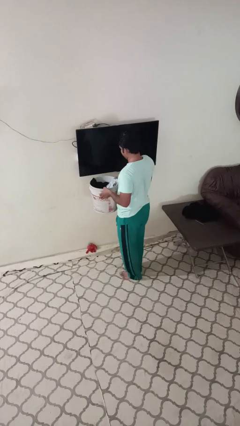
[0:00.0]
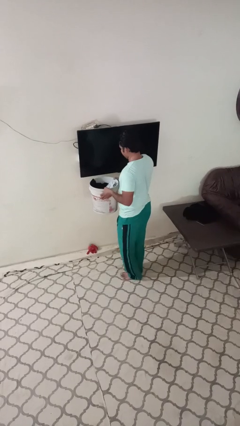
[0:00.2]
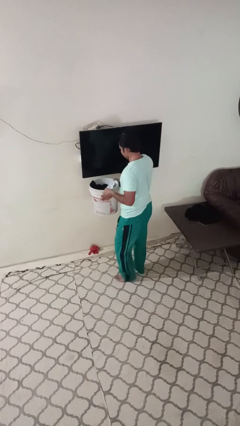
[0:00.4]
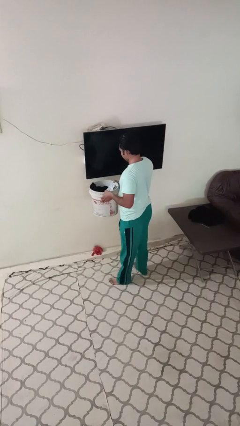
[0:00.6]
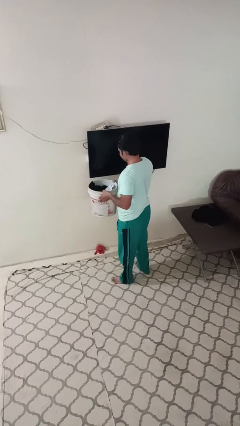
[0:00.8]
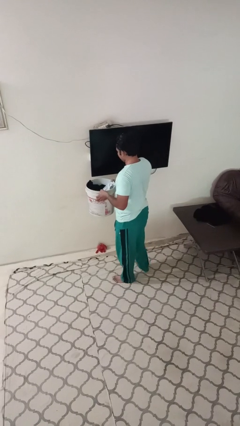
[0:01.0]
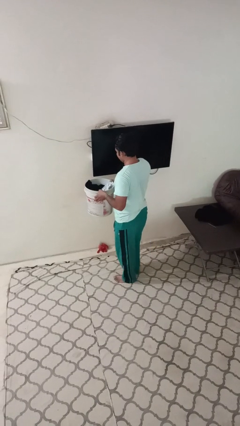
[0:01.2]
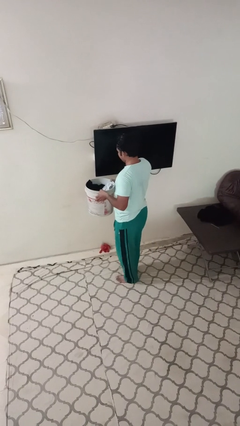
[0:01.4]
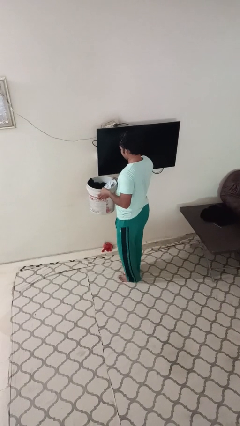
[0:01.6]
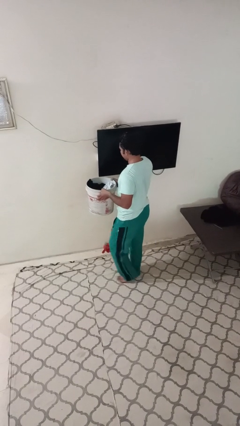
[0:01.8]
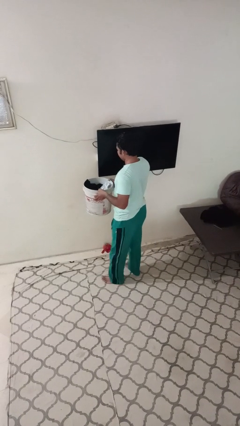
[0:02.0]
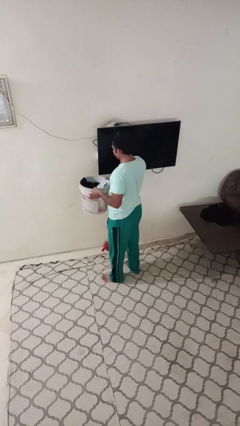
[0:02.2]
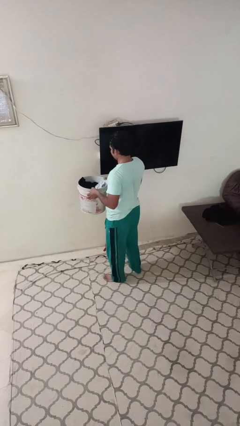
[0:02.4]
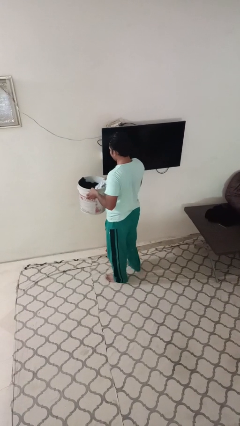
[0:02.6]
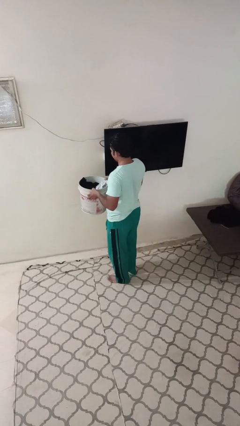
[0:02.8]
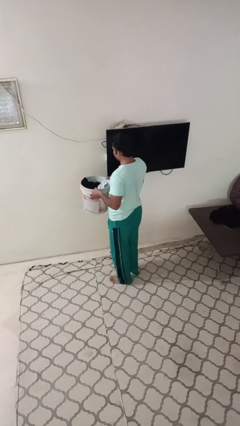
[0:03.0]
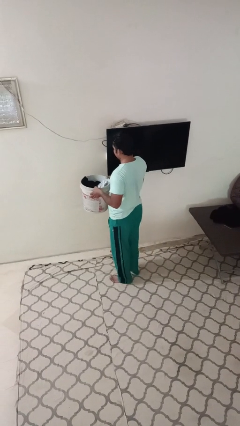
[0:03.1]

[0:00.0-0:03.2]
person carries laundry basket

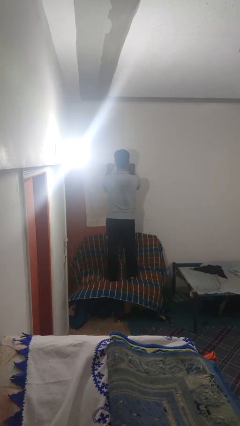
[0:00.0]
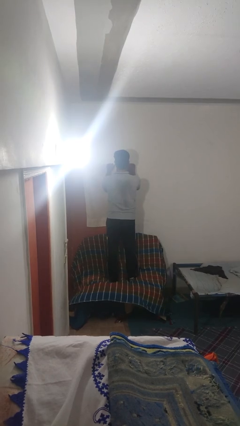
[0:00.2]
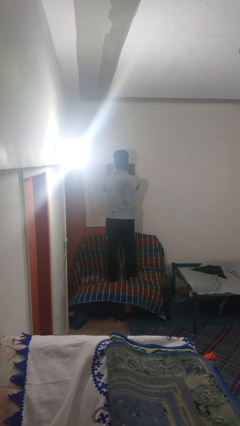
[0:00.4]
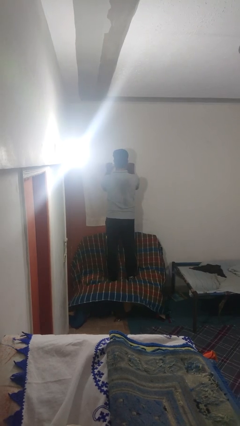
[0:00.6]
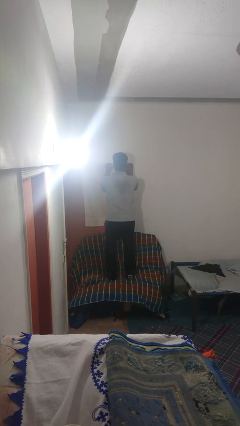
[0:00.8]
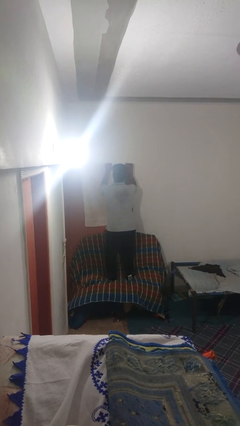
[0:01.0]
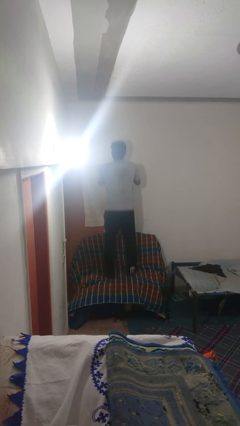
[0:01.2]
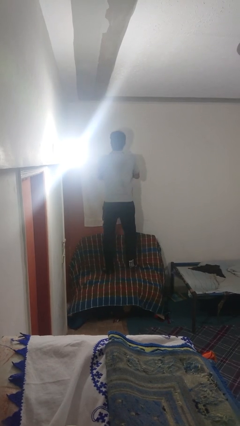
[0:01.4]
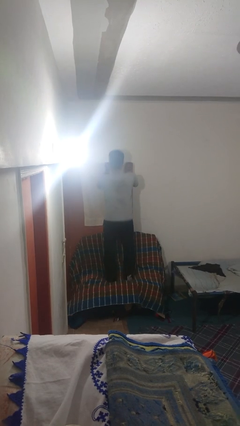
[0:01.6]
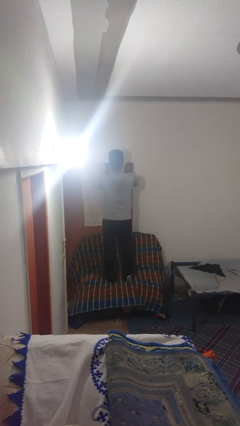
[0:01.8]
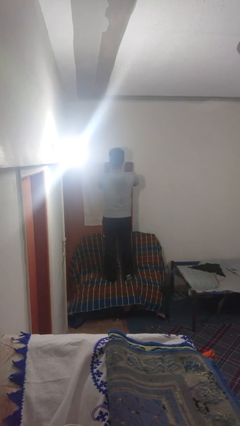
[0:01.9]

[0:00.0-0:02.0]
person jumps on couch

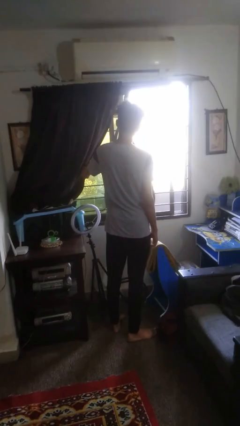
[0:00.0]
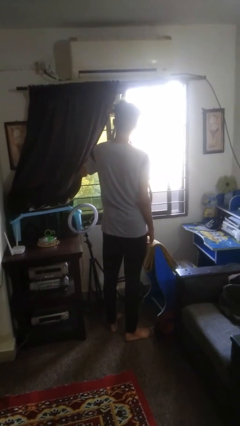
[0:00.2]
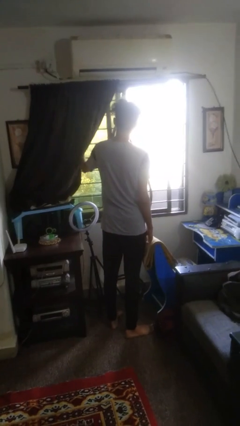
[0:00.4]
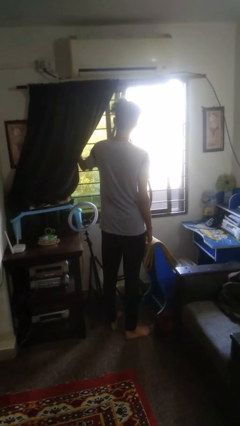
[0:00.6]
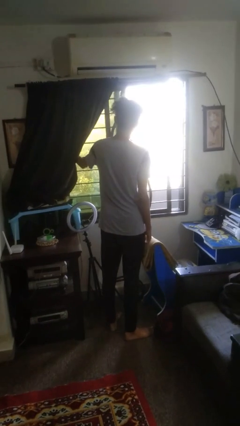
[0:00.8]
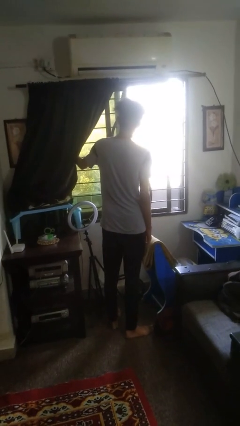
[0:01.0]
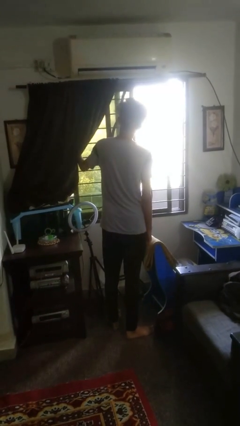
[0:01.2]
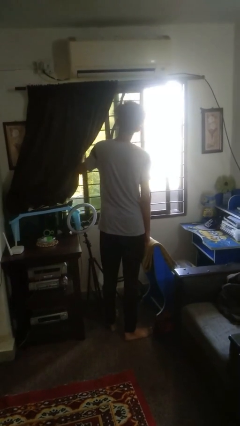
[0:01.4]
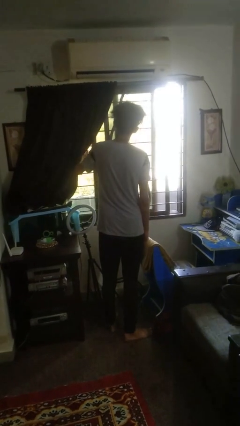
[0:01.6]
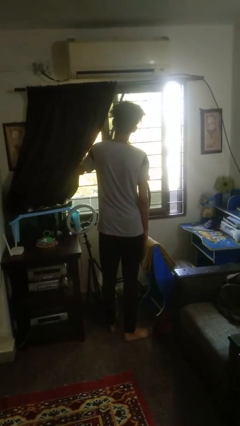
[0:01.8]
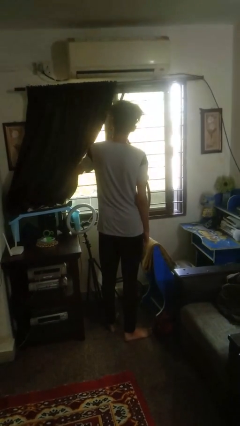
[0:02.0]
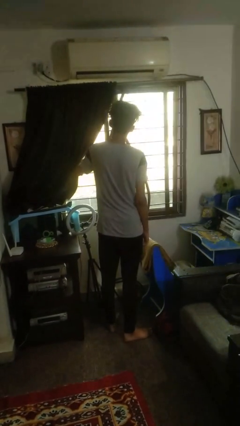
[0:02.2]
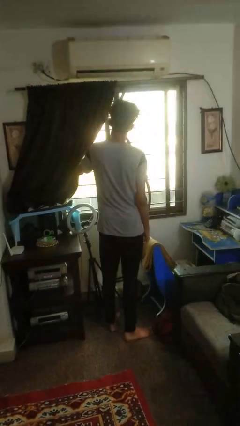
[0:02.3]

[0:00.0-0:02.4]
person closes home window

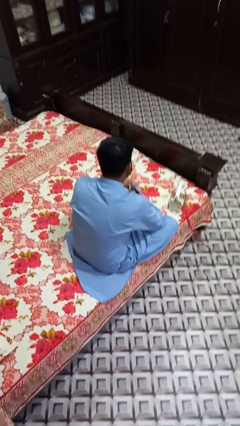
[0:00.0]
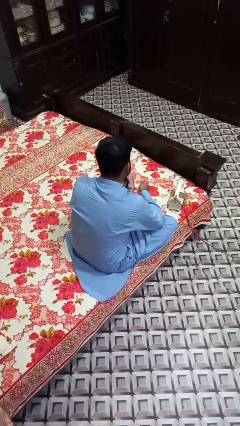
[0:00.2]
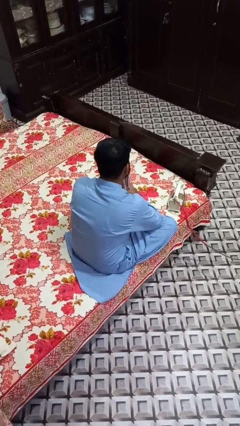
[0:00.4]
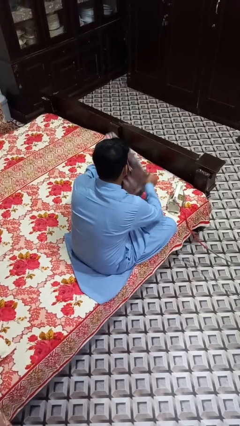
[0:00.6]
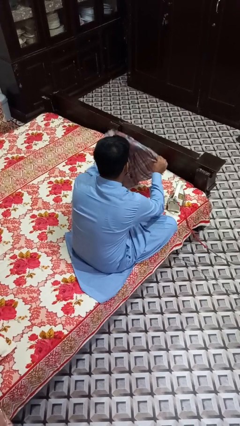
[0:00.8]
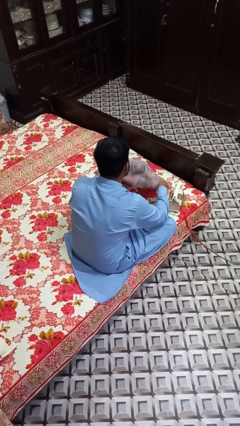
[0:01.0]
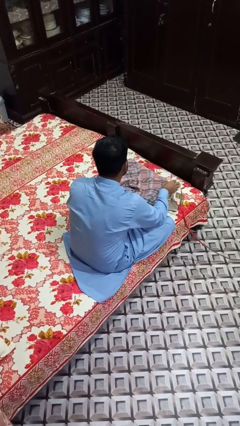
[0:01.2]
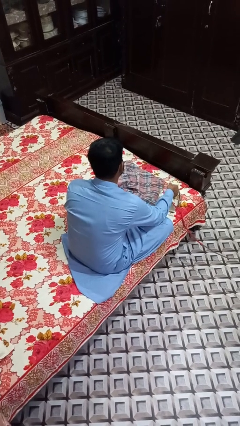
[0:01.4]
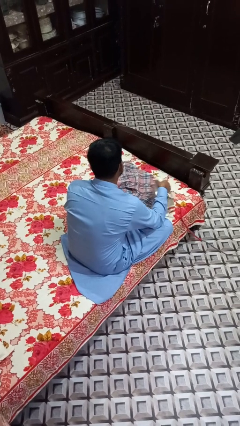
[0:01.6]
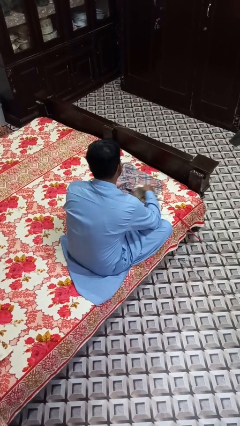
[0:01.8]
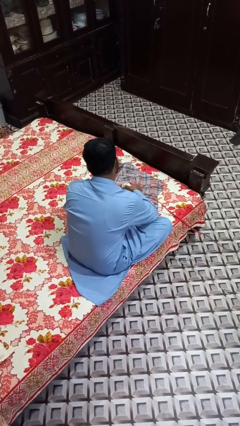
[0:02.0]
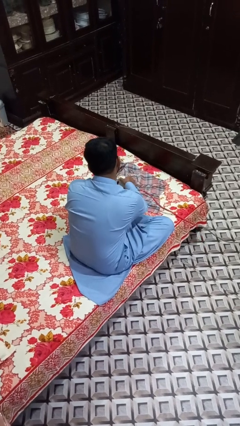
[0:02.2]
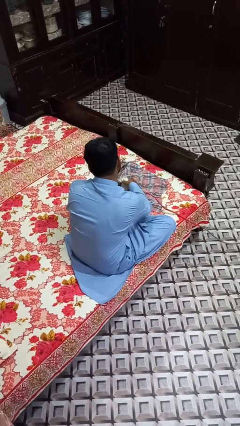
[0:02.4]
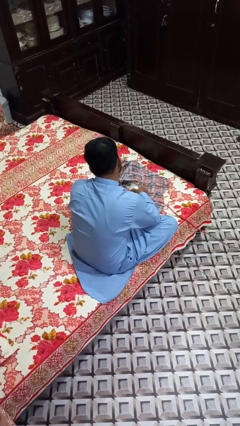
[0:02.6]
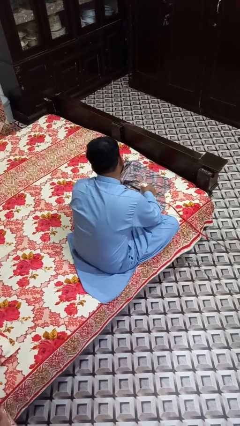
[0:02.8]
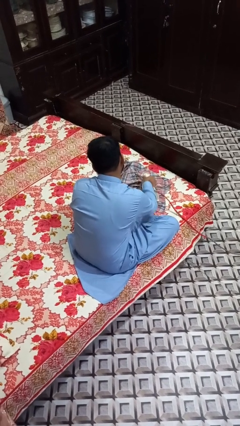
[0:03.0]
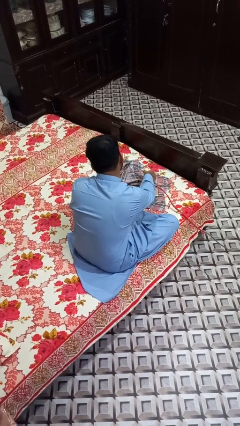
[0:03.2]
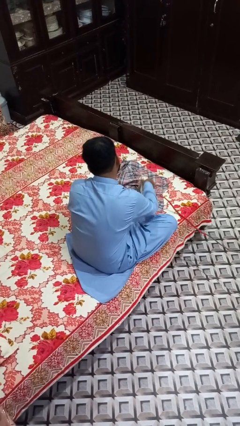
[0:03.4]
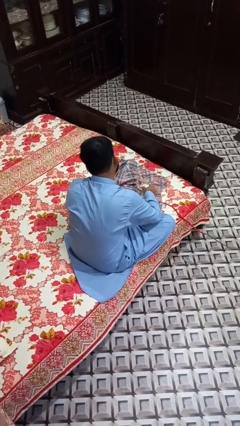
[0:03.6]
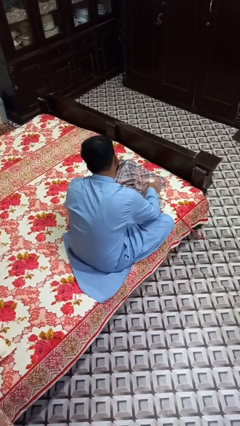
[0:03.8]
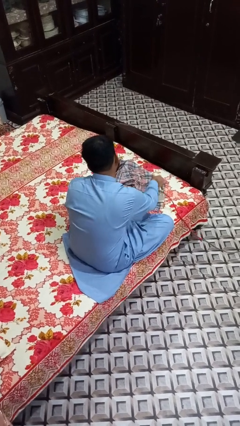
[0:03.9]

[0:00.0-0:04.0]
person irons clothes

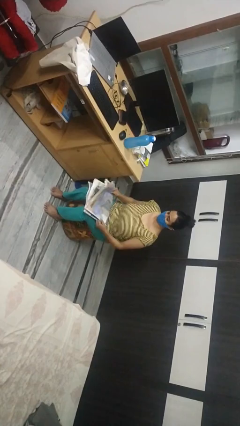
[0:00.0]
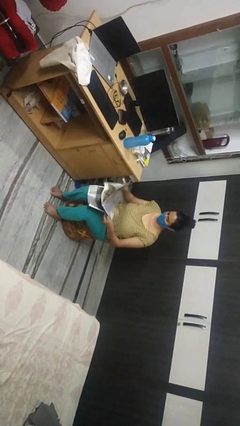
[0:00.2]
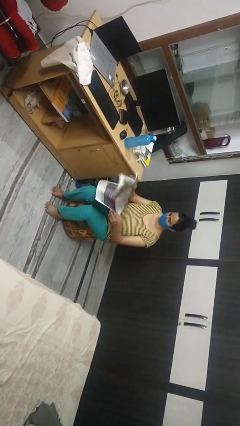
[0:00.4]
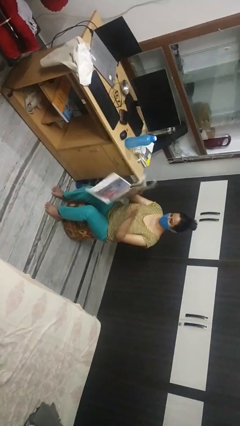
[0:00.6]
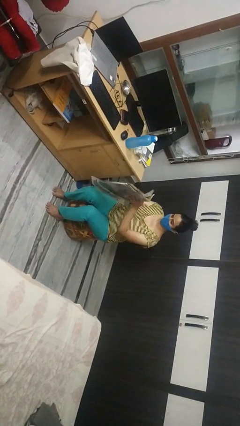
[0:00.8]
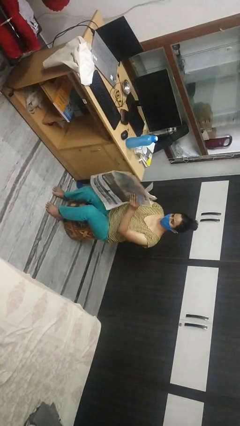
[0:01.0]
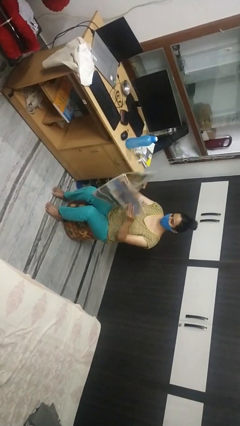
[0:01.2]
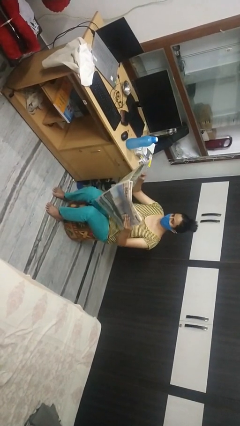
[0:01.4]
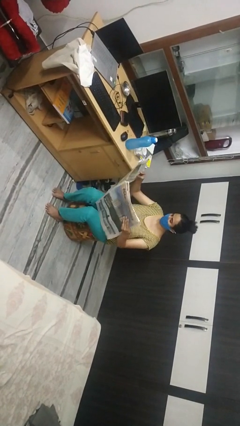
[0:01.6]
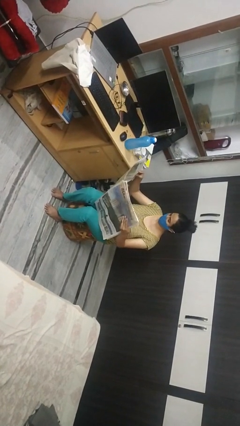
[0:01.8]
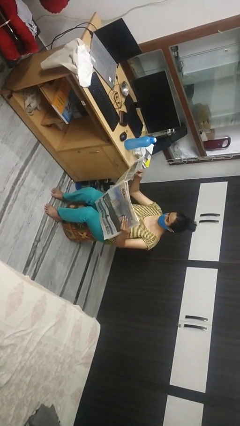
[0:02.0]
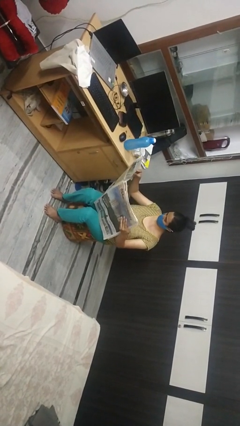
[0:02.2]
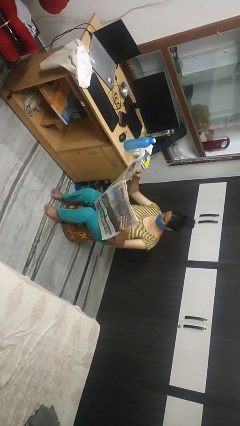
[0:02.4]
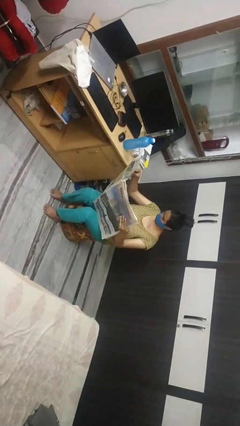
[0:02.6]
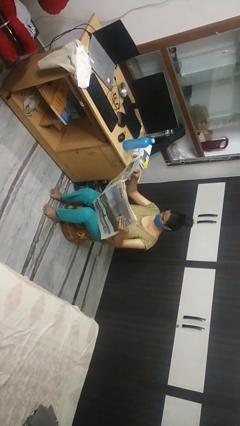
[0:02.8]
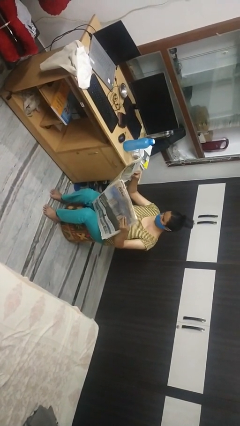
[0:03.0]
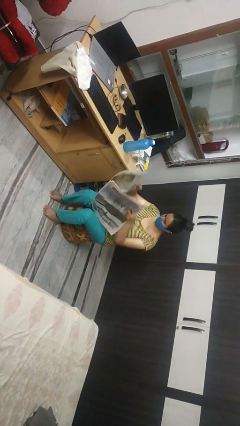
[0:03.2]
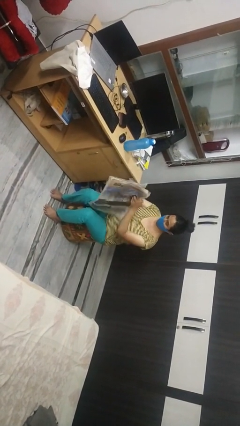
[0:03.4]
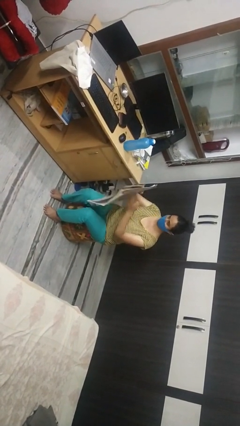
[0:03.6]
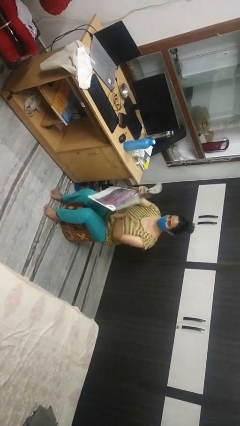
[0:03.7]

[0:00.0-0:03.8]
person reads newspaper

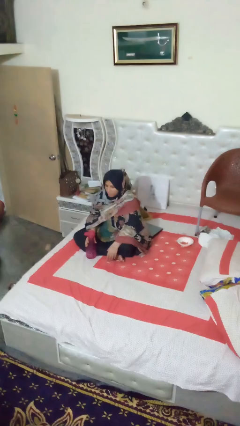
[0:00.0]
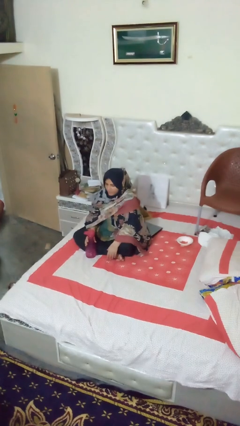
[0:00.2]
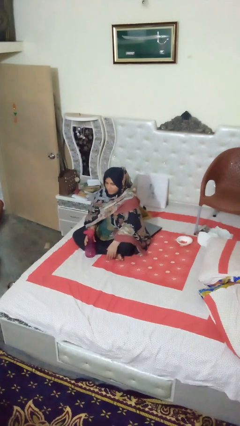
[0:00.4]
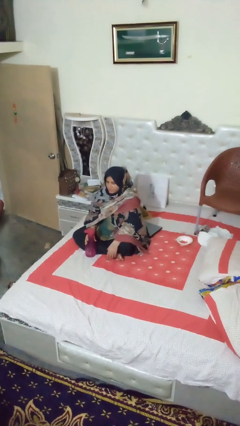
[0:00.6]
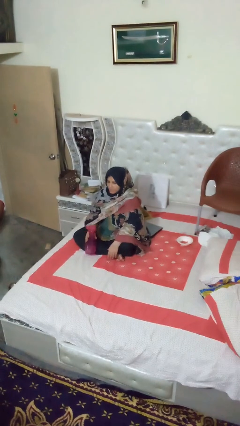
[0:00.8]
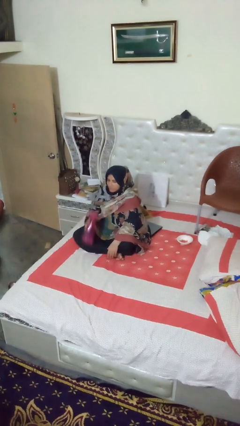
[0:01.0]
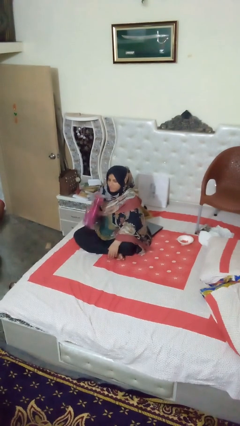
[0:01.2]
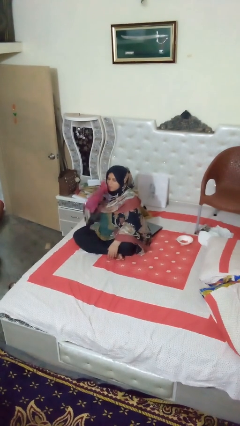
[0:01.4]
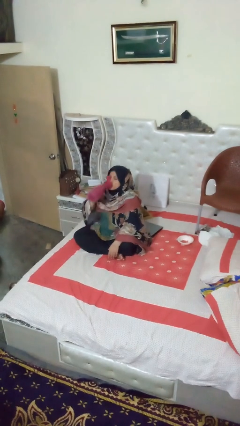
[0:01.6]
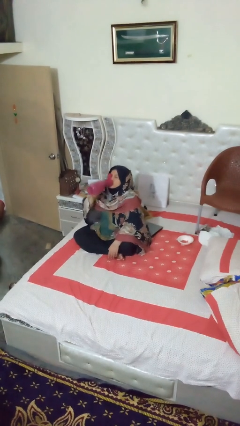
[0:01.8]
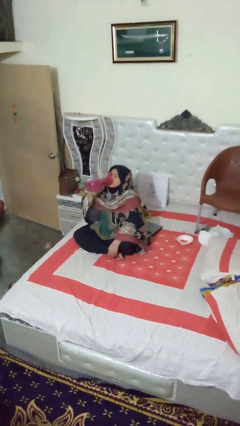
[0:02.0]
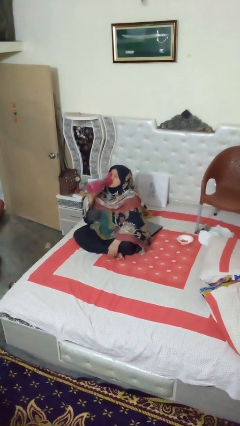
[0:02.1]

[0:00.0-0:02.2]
person drinks from bottle
